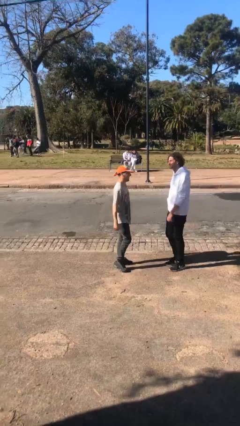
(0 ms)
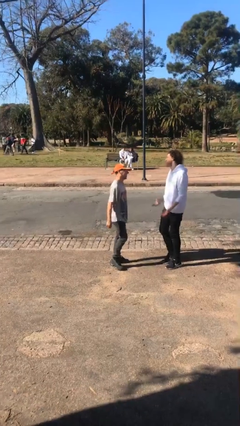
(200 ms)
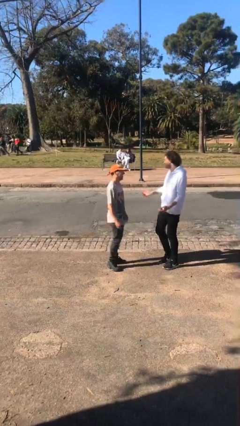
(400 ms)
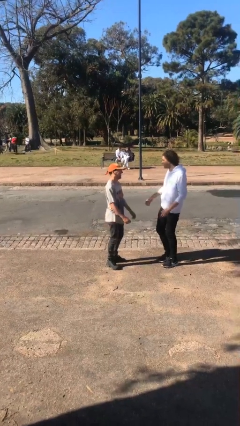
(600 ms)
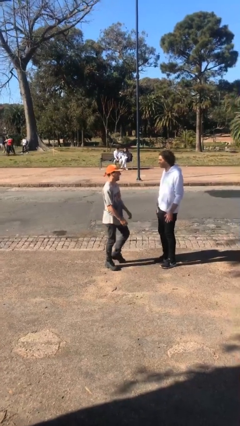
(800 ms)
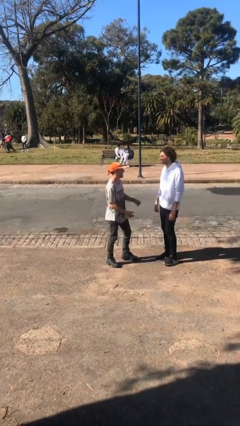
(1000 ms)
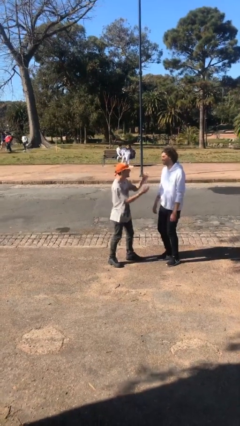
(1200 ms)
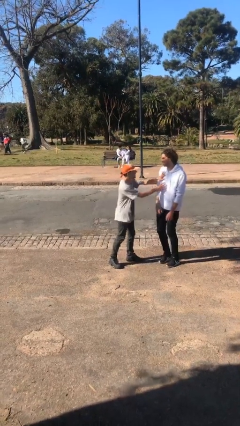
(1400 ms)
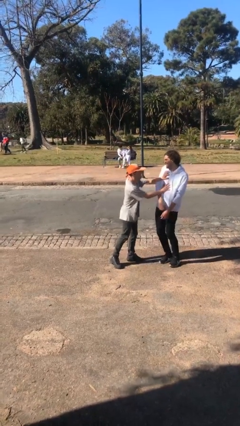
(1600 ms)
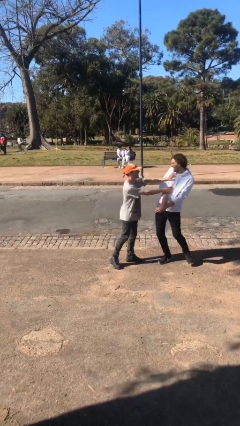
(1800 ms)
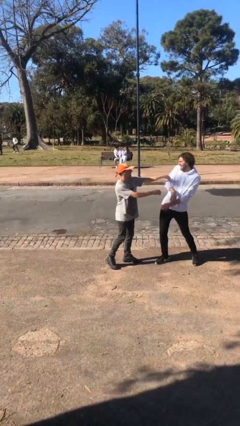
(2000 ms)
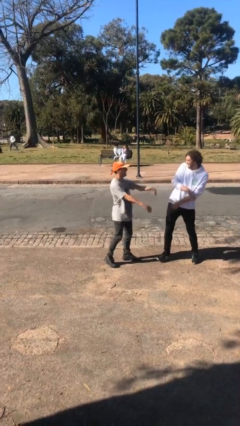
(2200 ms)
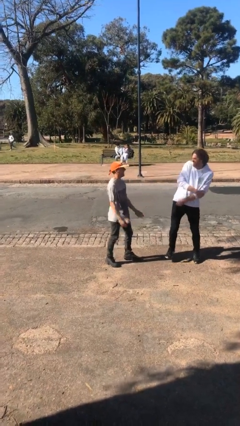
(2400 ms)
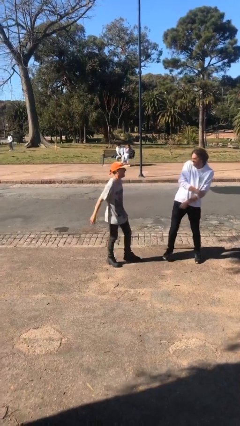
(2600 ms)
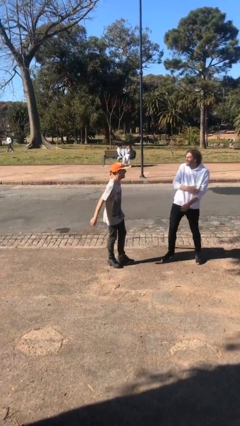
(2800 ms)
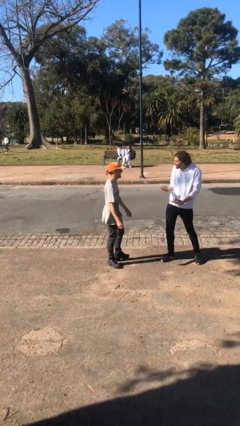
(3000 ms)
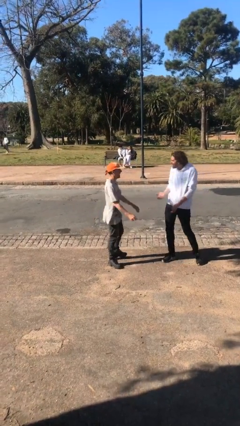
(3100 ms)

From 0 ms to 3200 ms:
person shoves person

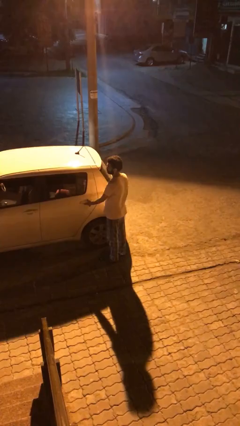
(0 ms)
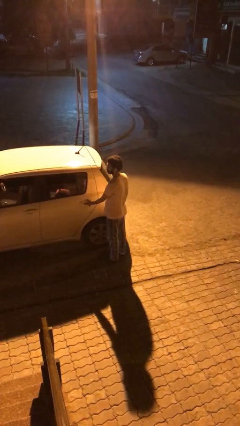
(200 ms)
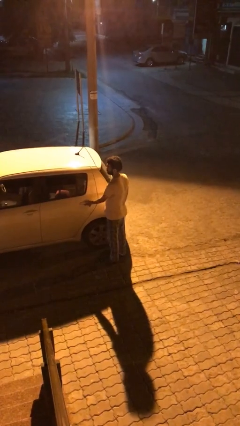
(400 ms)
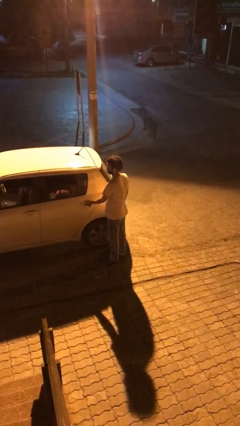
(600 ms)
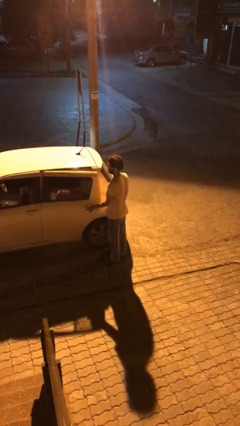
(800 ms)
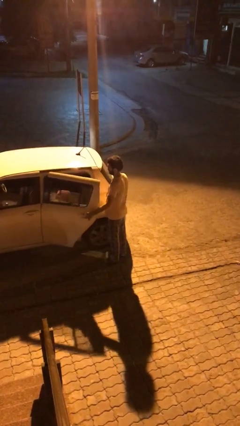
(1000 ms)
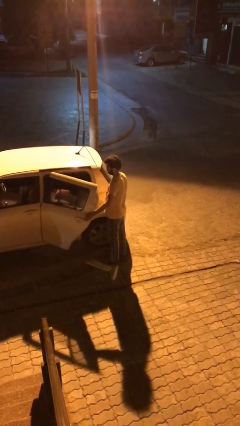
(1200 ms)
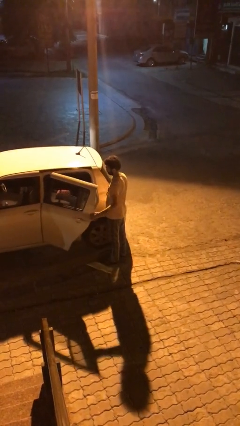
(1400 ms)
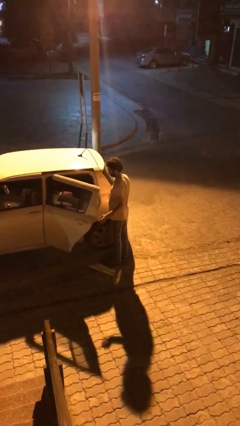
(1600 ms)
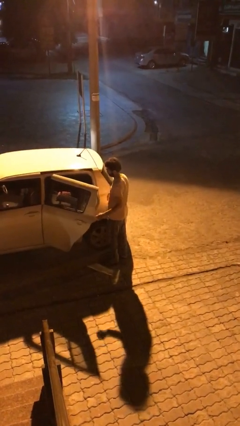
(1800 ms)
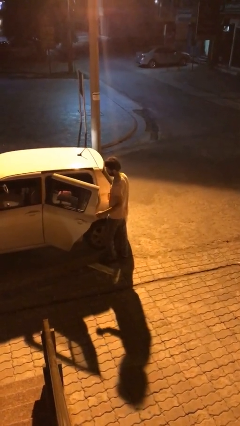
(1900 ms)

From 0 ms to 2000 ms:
person opens car door

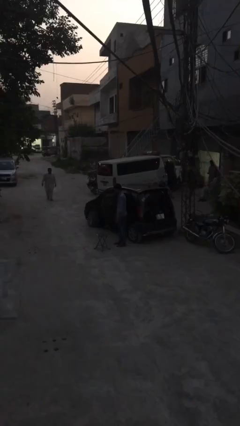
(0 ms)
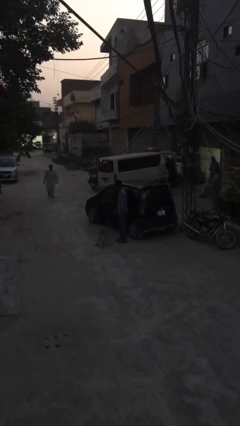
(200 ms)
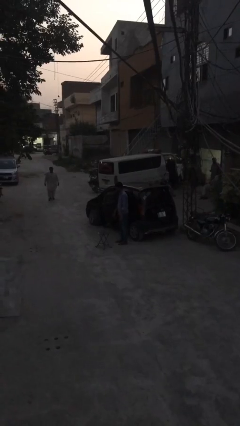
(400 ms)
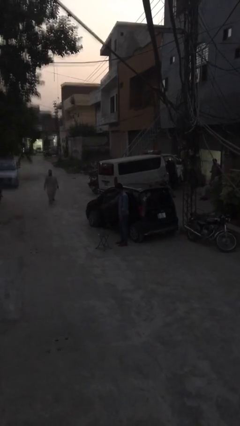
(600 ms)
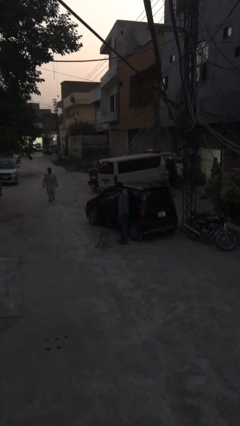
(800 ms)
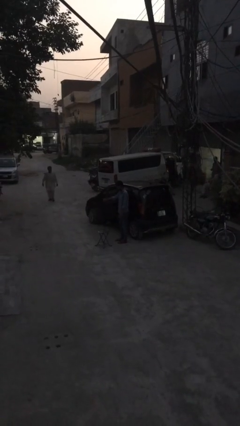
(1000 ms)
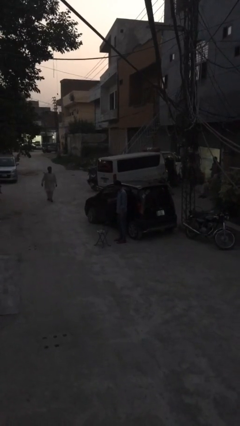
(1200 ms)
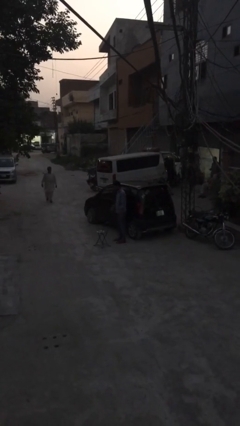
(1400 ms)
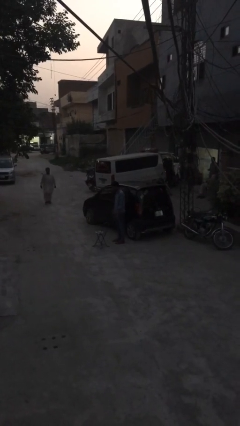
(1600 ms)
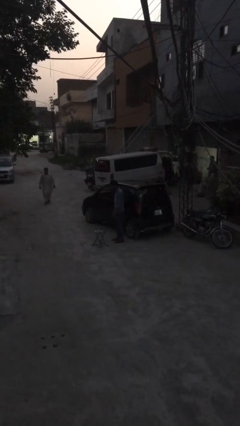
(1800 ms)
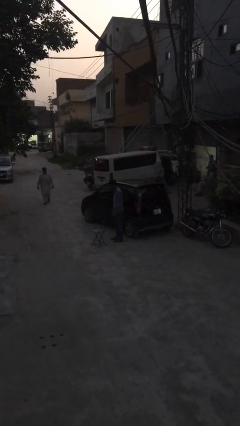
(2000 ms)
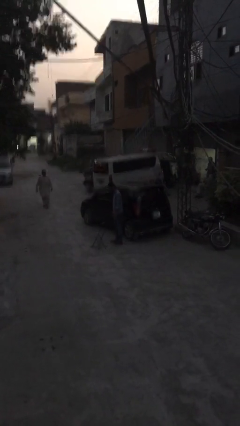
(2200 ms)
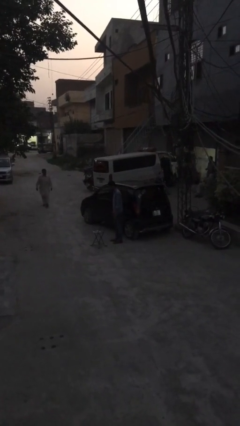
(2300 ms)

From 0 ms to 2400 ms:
person closes car door

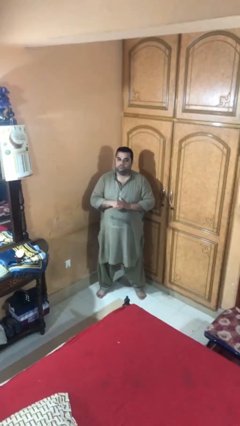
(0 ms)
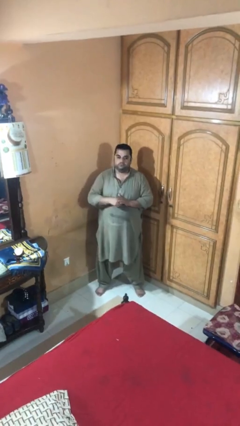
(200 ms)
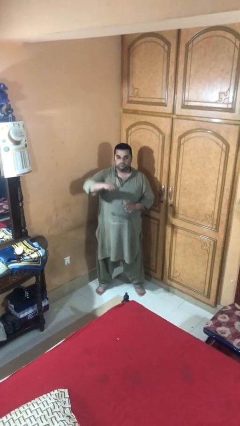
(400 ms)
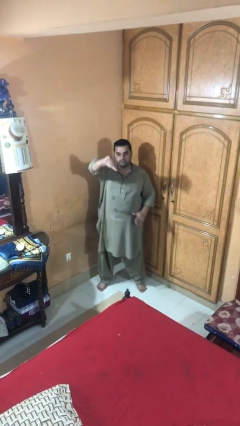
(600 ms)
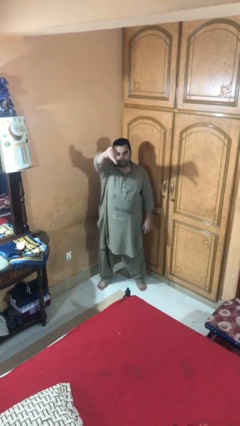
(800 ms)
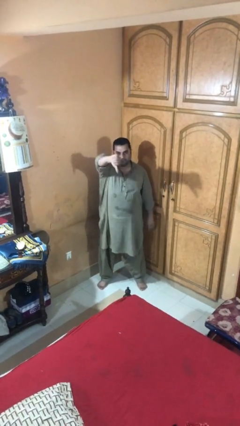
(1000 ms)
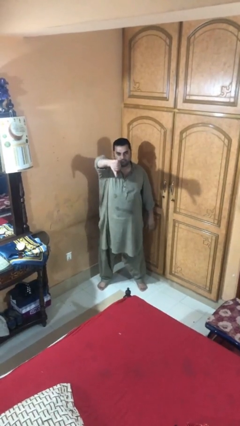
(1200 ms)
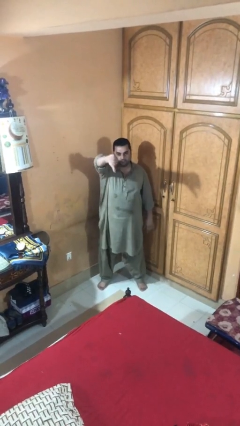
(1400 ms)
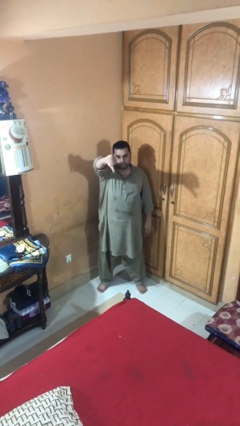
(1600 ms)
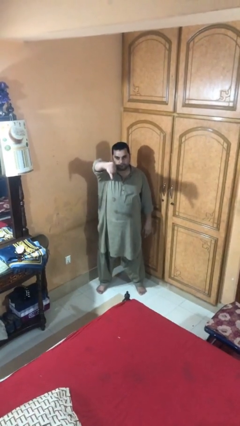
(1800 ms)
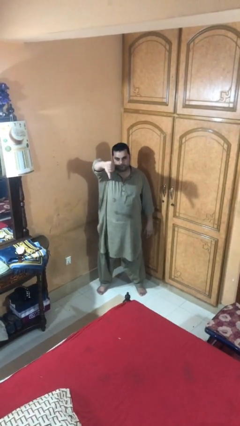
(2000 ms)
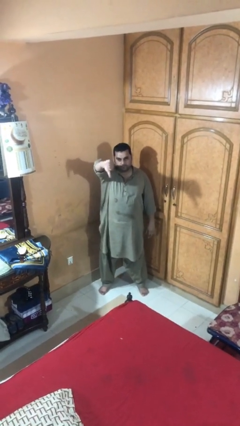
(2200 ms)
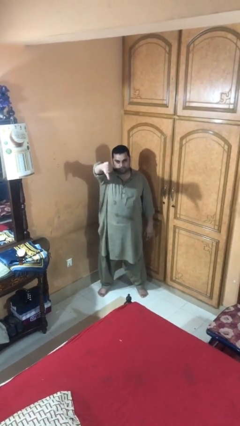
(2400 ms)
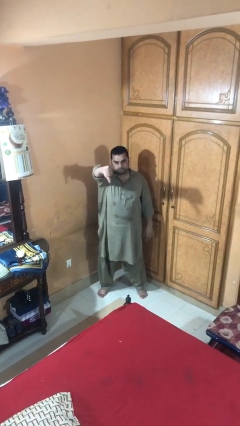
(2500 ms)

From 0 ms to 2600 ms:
person gestures thumbs down

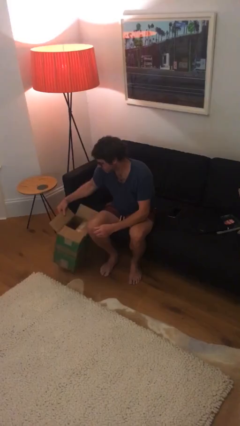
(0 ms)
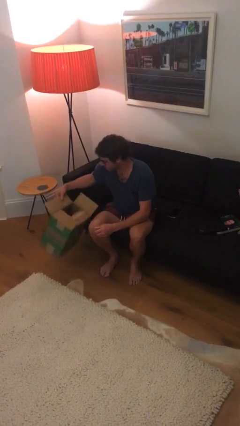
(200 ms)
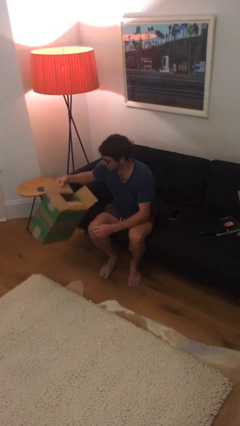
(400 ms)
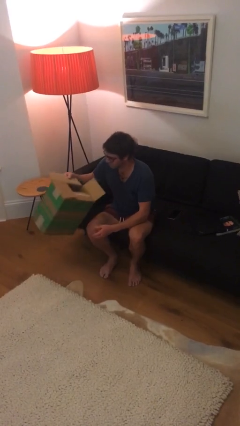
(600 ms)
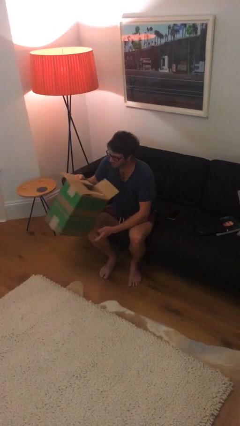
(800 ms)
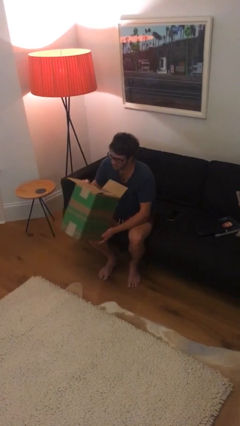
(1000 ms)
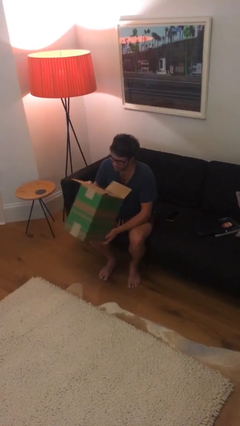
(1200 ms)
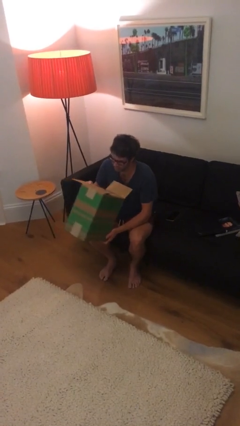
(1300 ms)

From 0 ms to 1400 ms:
person picks up object from floor

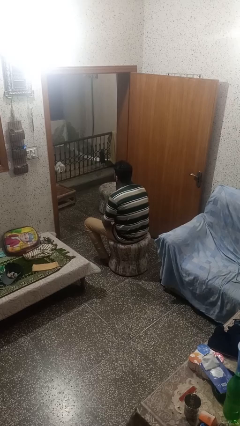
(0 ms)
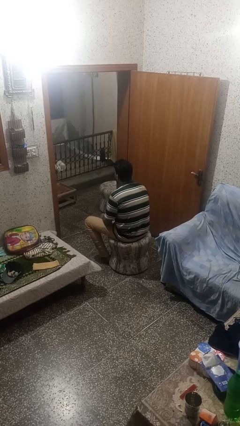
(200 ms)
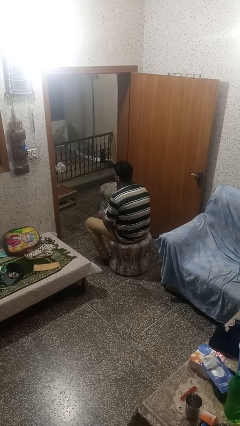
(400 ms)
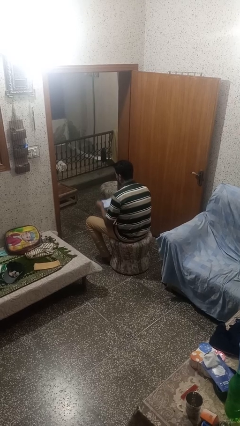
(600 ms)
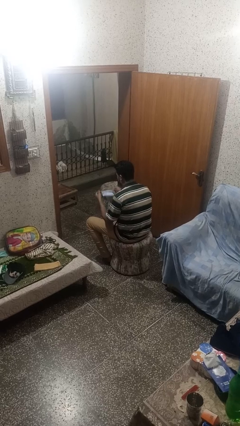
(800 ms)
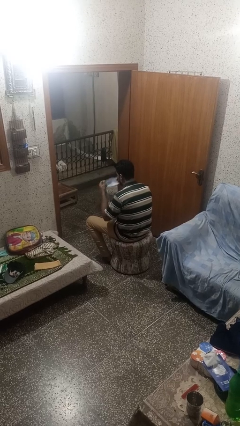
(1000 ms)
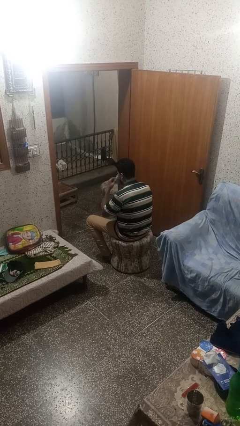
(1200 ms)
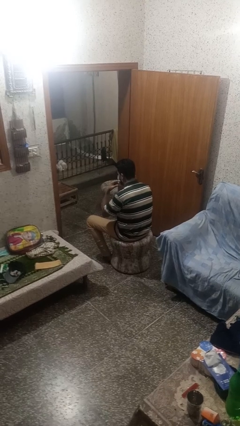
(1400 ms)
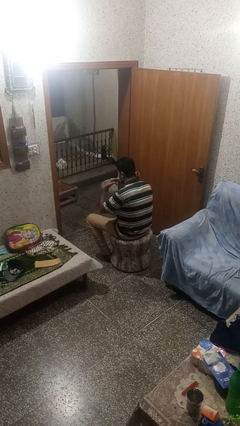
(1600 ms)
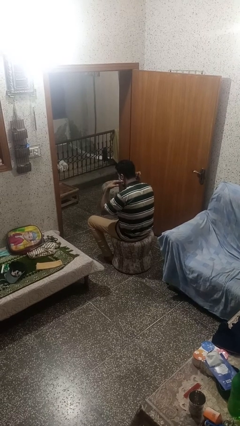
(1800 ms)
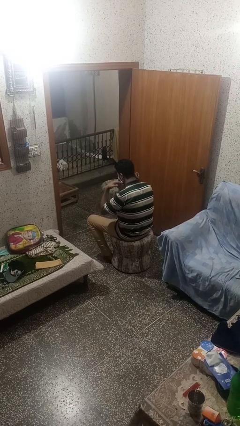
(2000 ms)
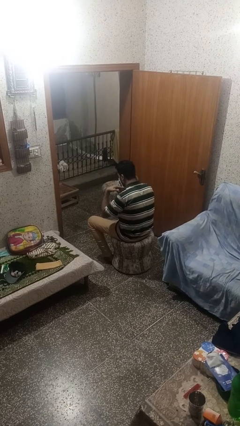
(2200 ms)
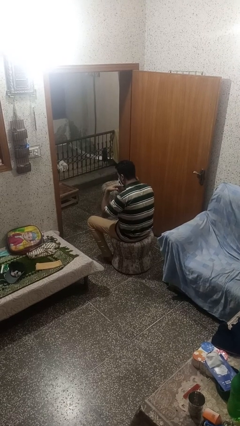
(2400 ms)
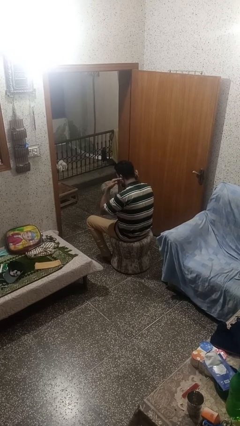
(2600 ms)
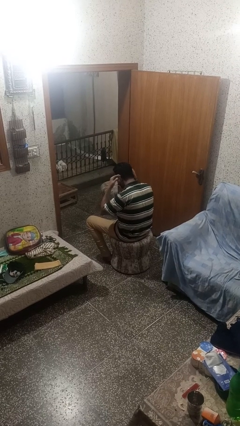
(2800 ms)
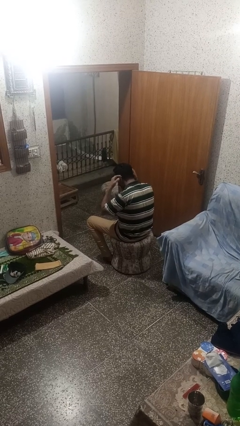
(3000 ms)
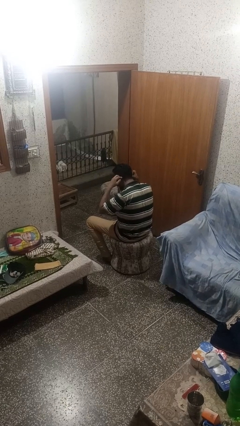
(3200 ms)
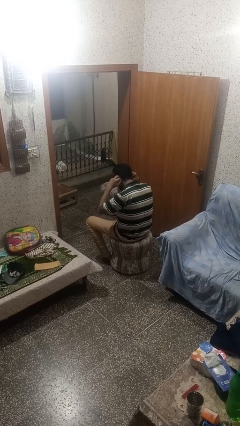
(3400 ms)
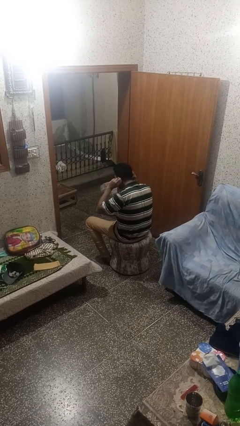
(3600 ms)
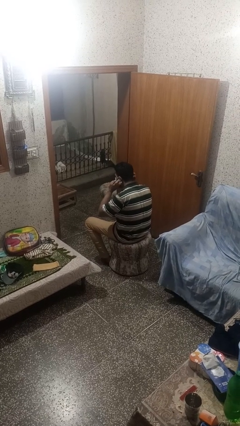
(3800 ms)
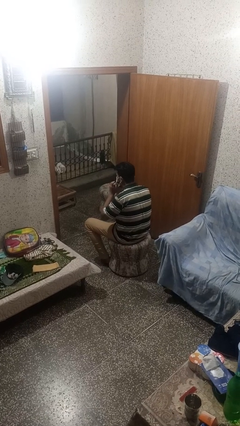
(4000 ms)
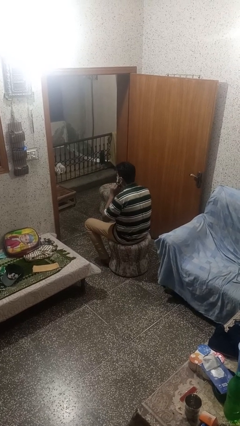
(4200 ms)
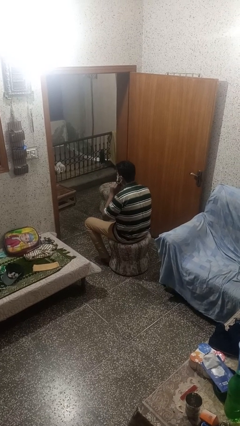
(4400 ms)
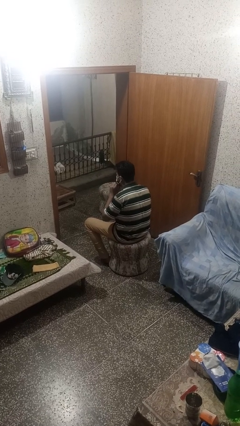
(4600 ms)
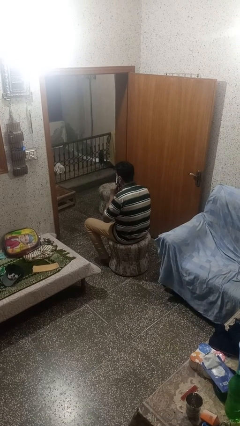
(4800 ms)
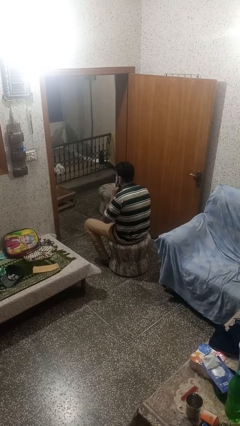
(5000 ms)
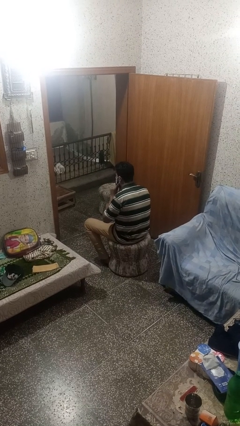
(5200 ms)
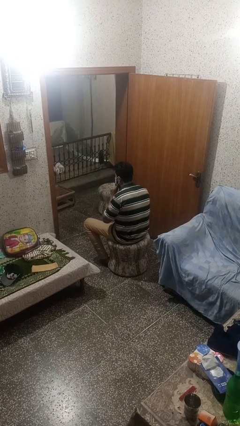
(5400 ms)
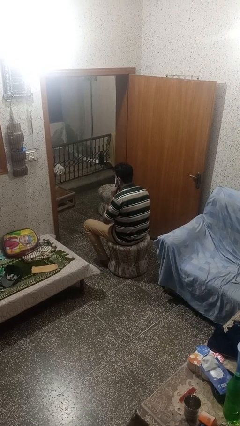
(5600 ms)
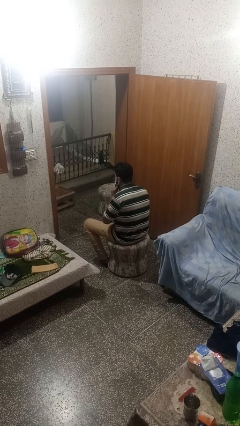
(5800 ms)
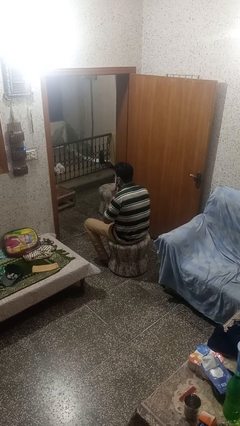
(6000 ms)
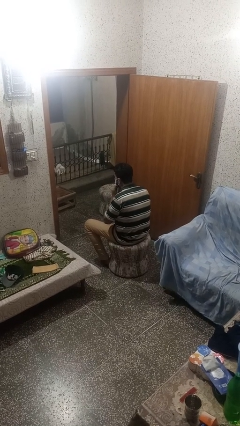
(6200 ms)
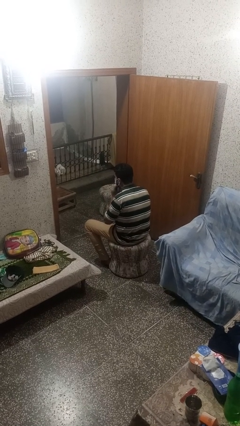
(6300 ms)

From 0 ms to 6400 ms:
person puts on facemask
